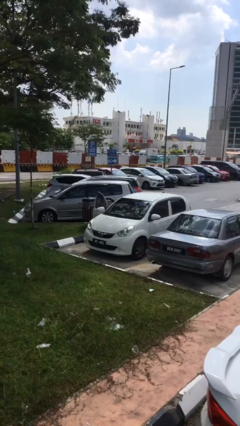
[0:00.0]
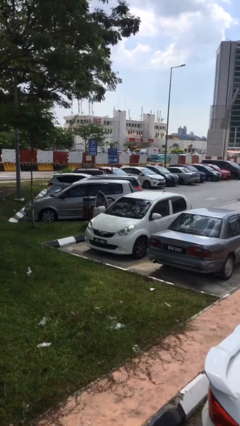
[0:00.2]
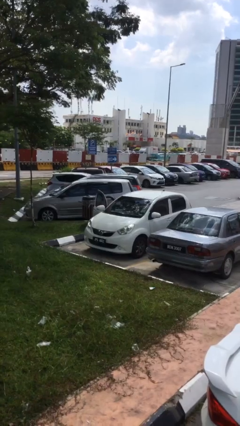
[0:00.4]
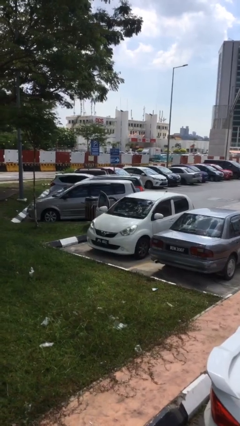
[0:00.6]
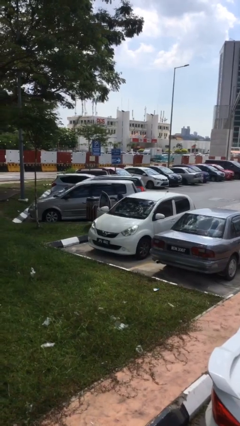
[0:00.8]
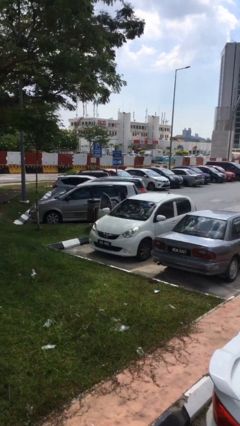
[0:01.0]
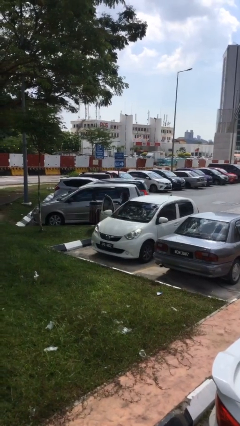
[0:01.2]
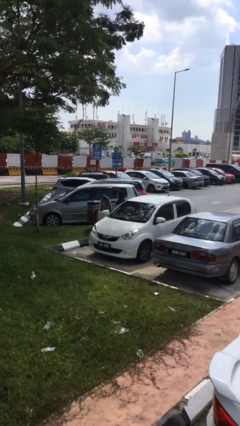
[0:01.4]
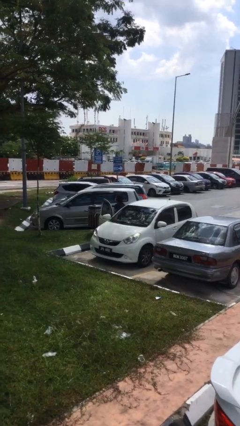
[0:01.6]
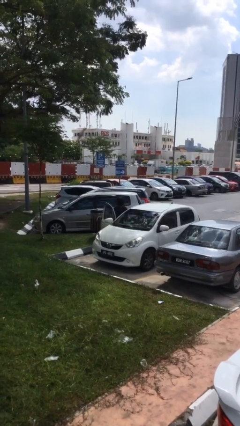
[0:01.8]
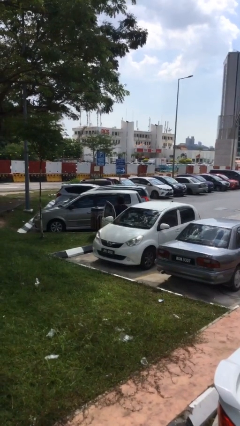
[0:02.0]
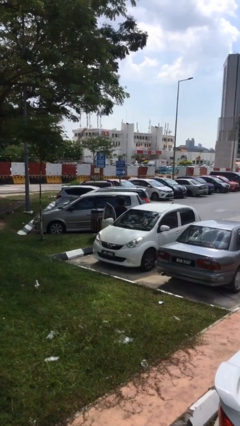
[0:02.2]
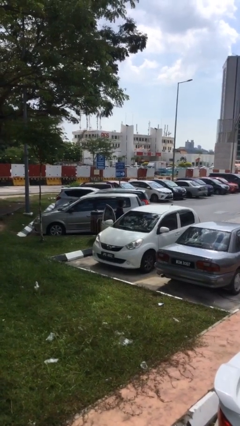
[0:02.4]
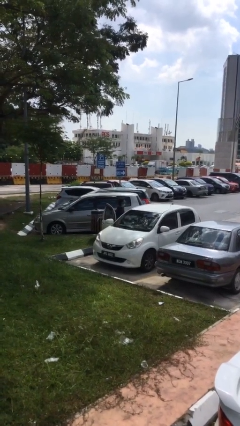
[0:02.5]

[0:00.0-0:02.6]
person exits car

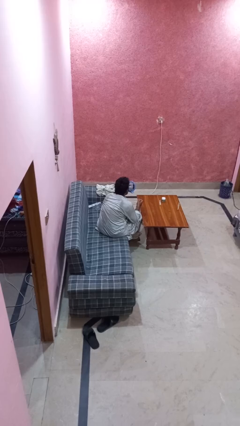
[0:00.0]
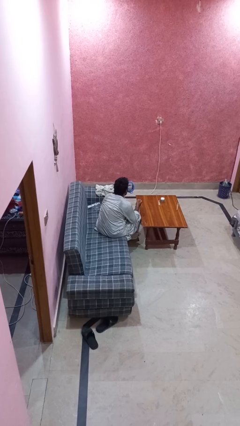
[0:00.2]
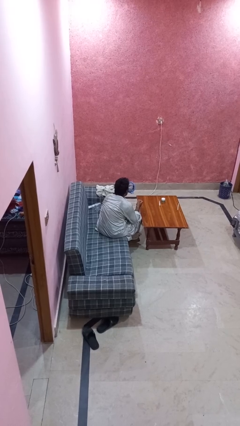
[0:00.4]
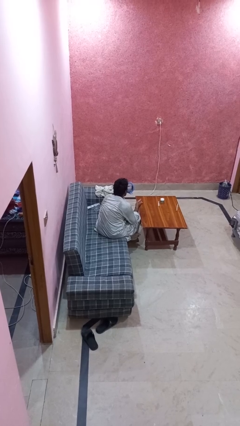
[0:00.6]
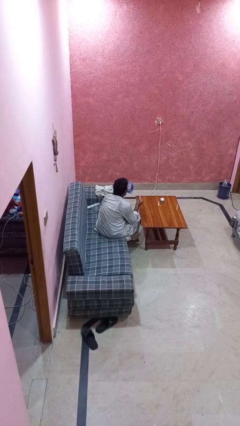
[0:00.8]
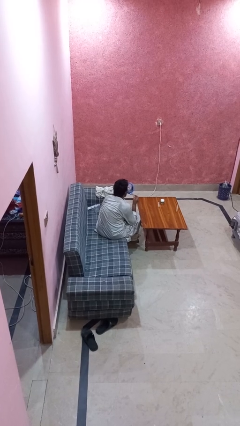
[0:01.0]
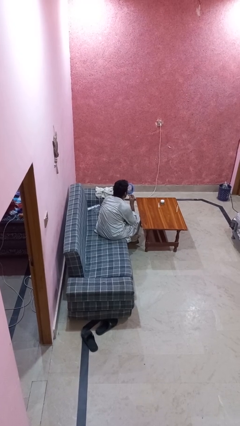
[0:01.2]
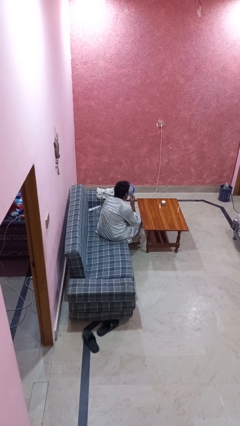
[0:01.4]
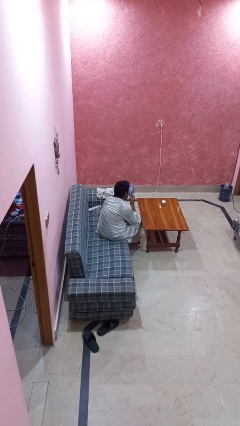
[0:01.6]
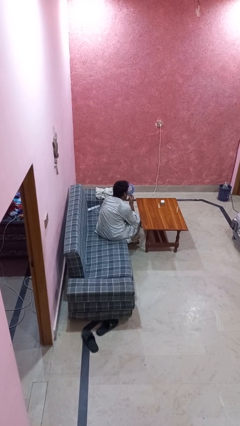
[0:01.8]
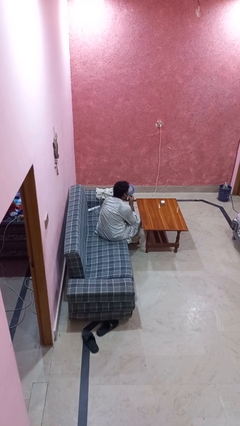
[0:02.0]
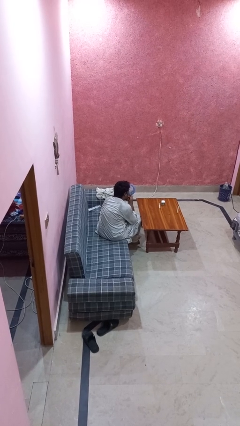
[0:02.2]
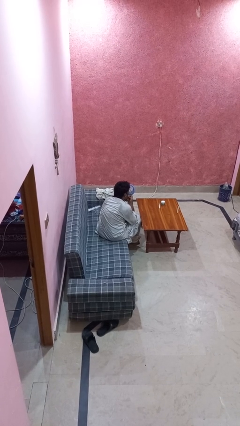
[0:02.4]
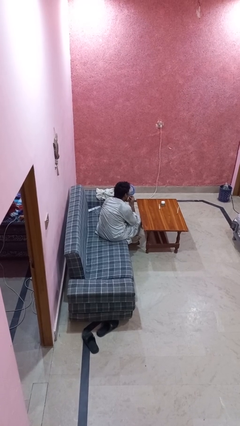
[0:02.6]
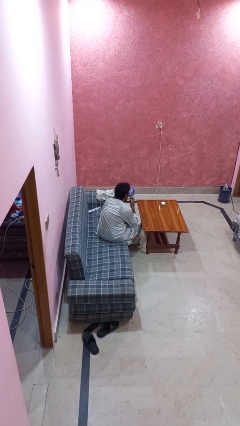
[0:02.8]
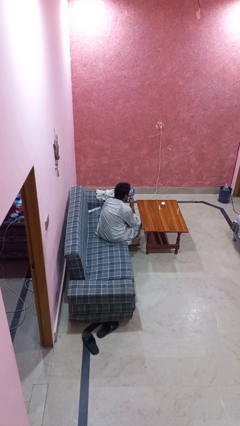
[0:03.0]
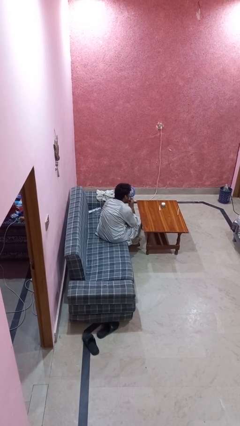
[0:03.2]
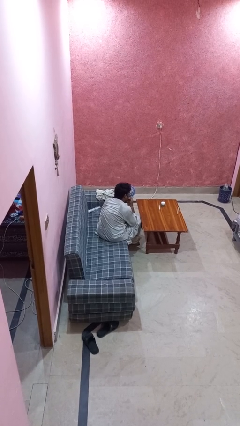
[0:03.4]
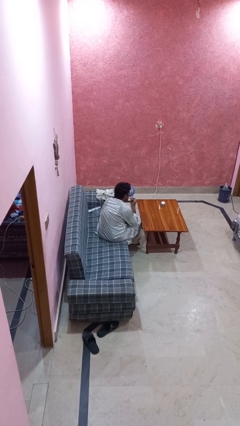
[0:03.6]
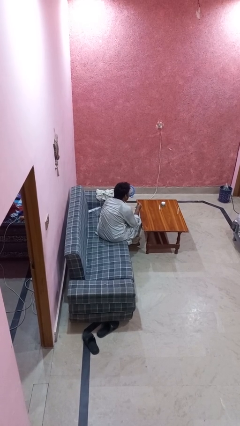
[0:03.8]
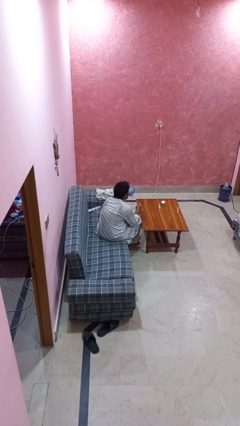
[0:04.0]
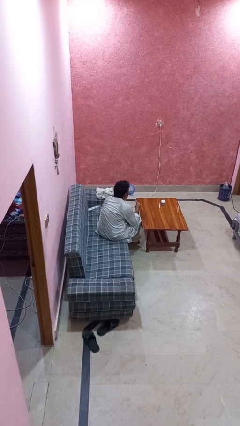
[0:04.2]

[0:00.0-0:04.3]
person applies lip makeup

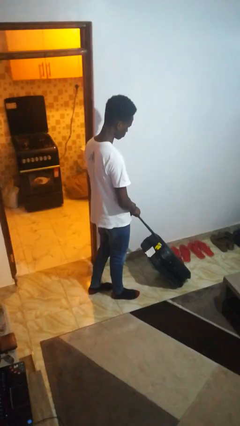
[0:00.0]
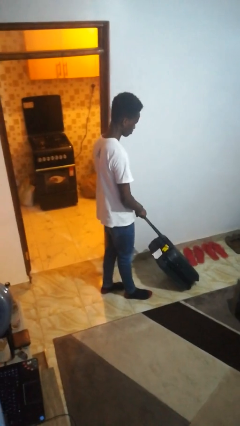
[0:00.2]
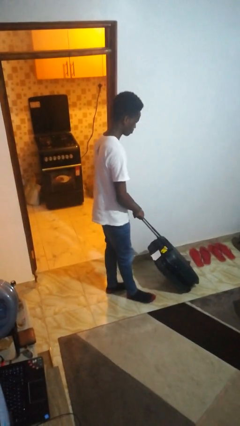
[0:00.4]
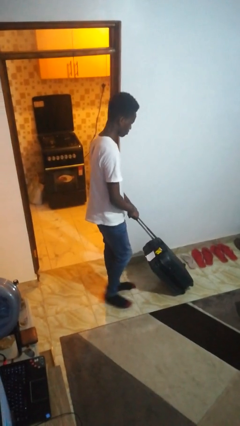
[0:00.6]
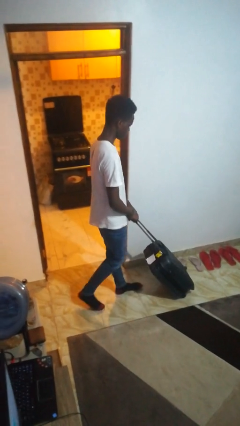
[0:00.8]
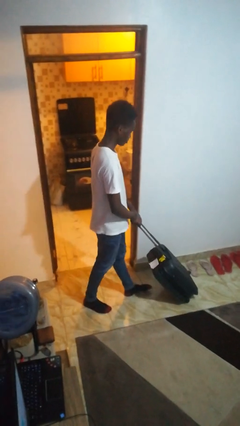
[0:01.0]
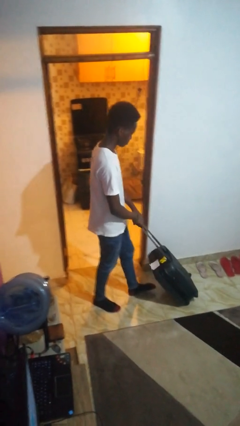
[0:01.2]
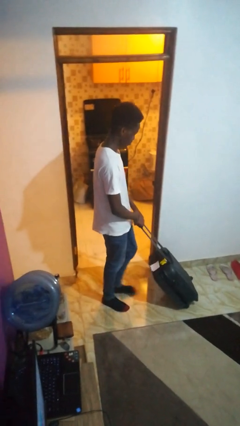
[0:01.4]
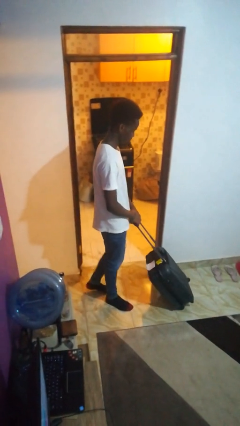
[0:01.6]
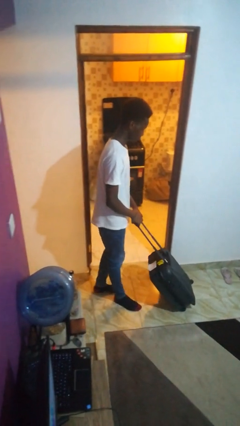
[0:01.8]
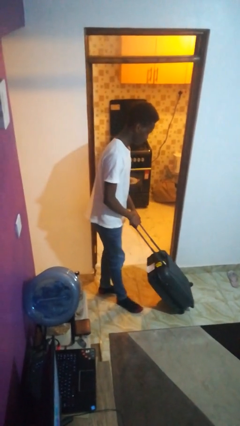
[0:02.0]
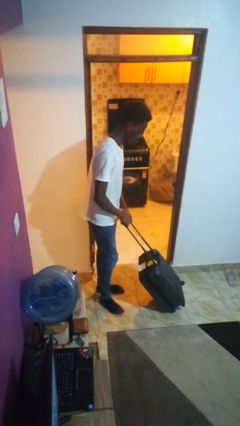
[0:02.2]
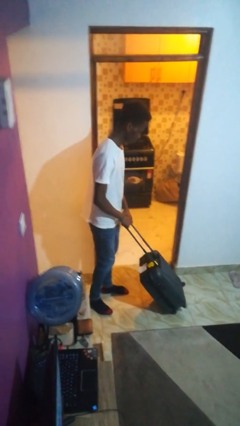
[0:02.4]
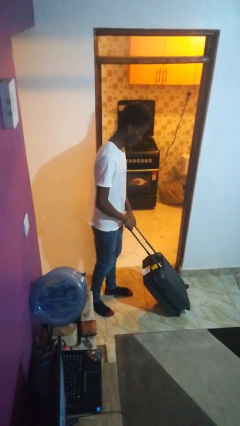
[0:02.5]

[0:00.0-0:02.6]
person pulls wheeled cart

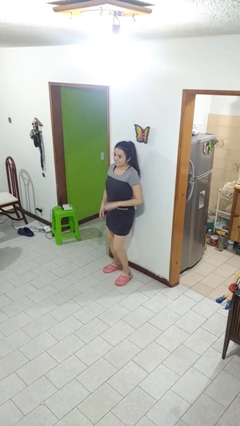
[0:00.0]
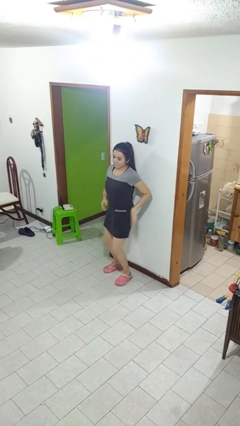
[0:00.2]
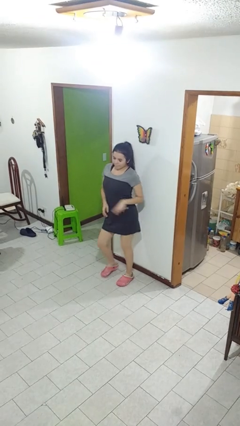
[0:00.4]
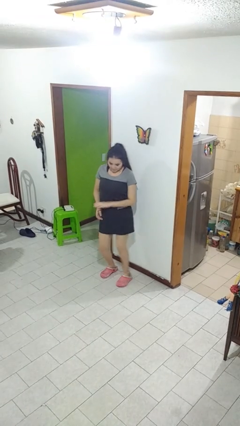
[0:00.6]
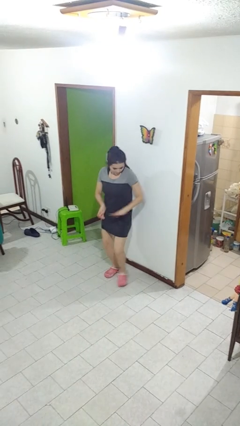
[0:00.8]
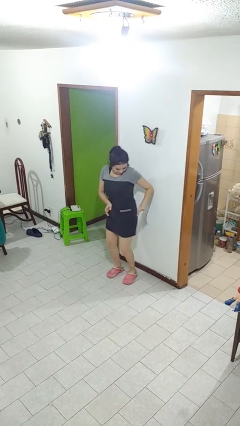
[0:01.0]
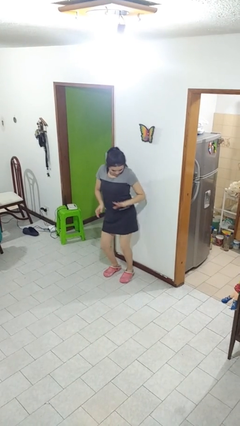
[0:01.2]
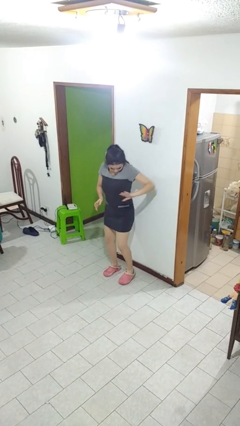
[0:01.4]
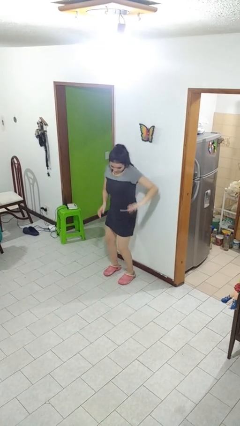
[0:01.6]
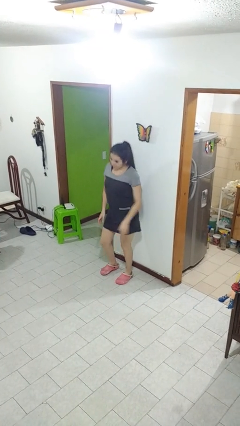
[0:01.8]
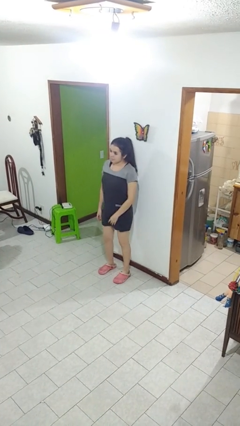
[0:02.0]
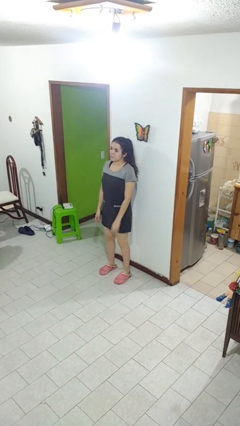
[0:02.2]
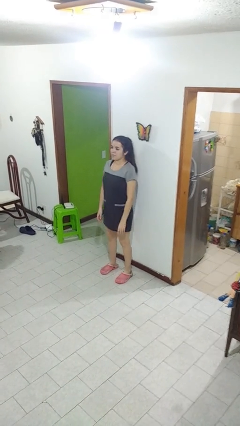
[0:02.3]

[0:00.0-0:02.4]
person dances in place

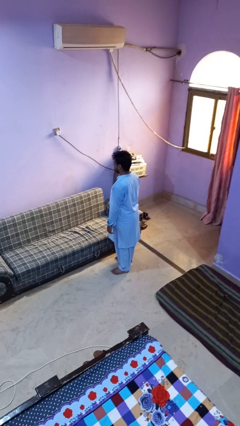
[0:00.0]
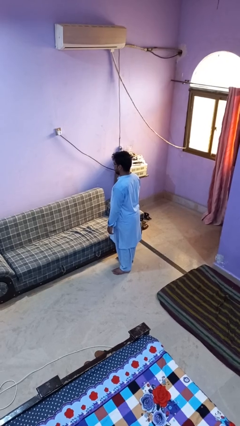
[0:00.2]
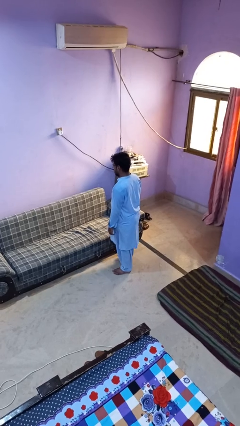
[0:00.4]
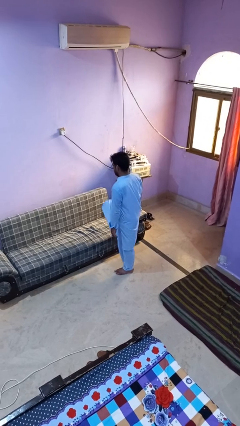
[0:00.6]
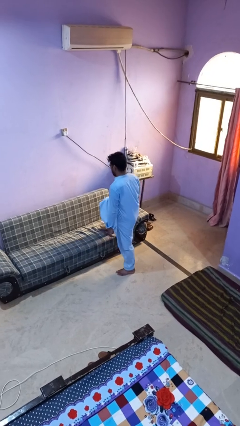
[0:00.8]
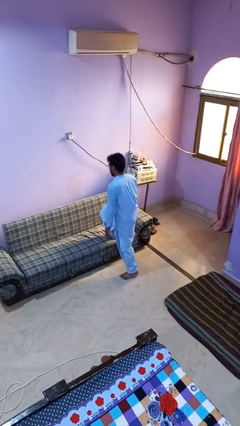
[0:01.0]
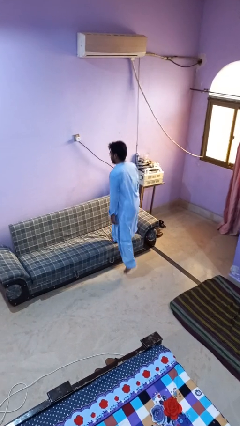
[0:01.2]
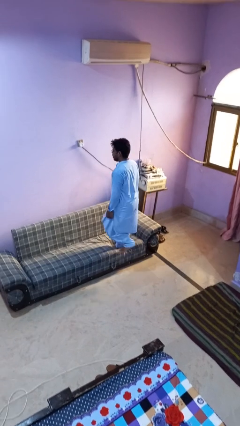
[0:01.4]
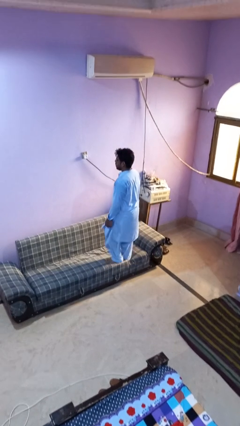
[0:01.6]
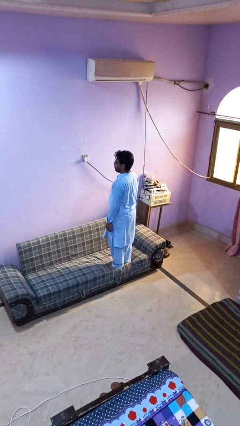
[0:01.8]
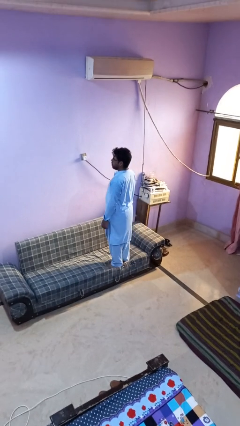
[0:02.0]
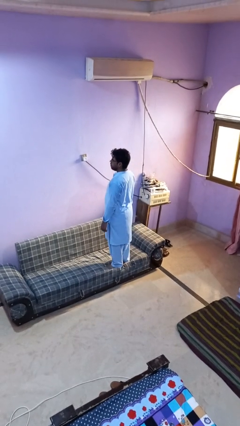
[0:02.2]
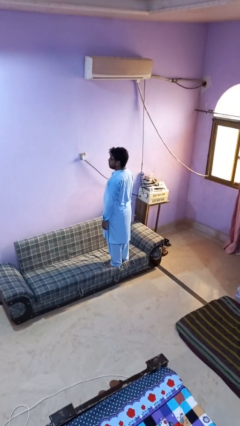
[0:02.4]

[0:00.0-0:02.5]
person climbs on couch

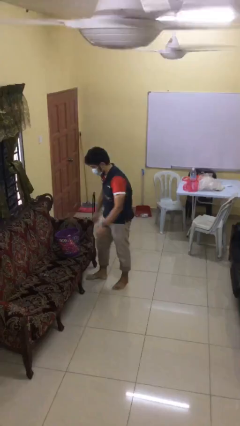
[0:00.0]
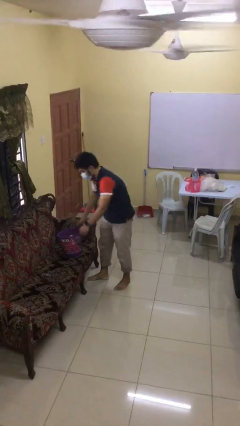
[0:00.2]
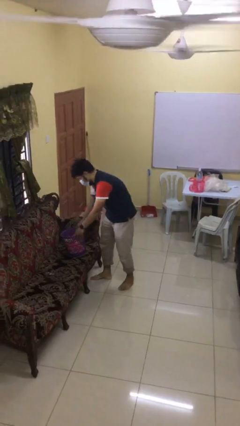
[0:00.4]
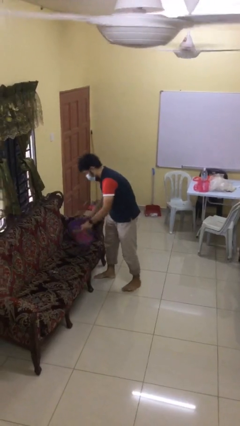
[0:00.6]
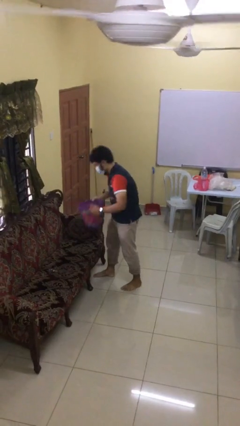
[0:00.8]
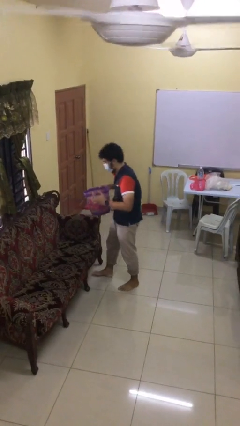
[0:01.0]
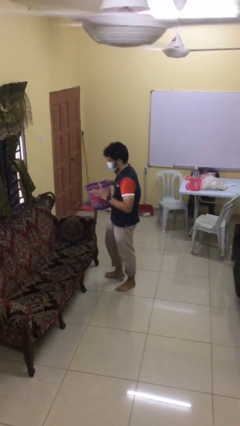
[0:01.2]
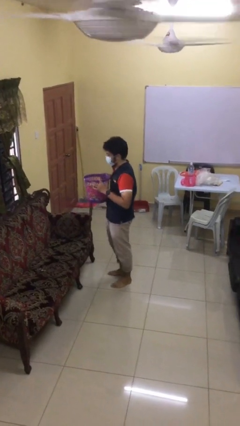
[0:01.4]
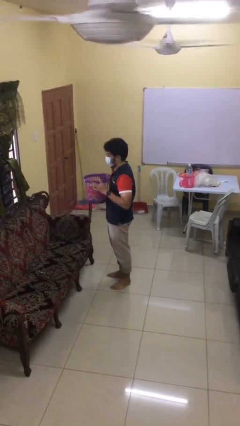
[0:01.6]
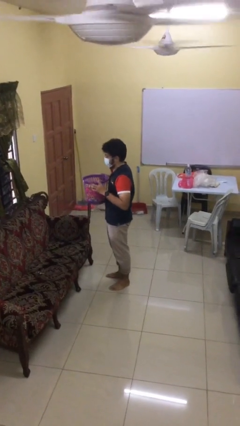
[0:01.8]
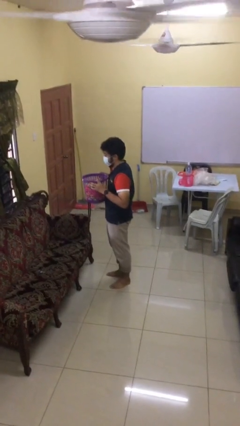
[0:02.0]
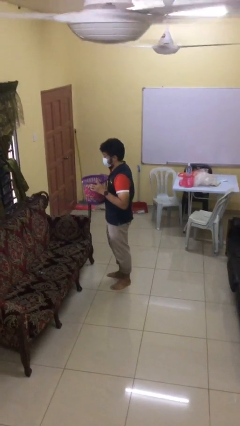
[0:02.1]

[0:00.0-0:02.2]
person picks up object from couch

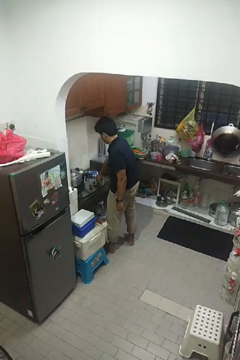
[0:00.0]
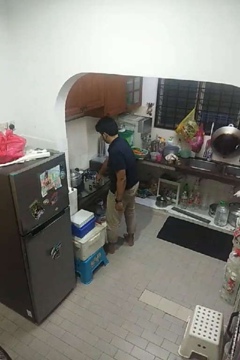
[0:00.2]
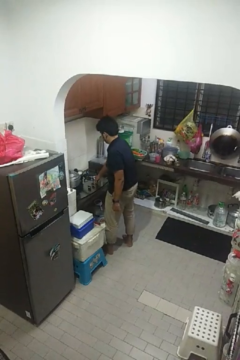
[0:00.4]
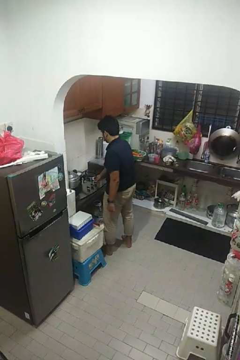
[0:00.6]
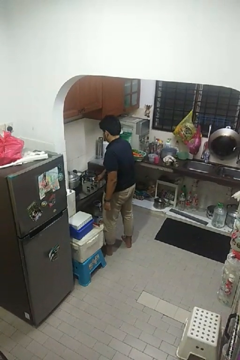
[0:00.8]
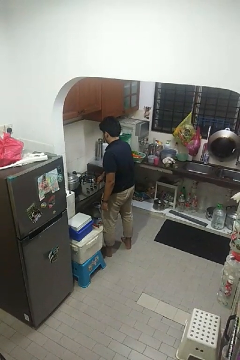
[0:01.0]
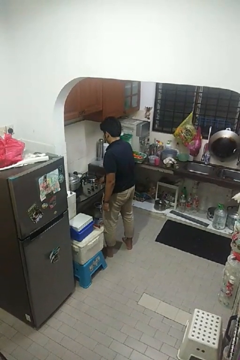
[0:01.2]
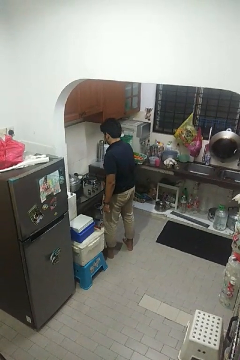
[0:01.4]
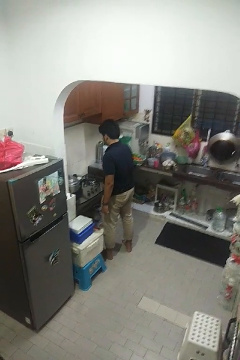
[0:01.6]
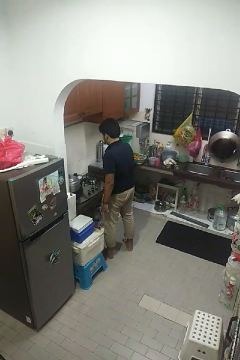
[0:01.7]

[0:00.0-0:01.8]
person turns off stovetop
